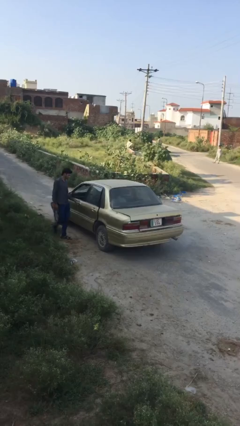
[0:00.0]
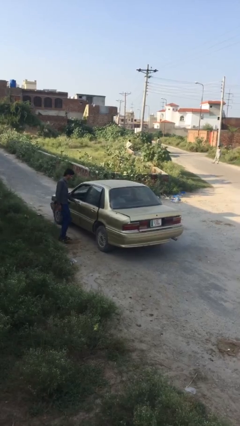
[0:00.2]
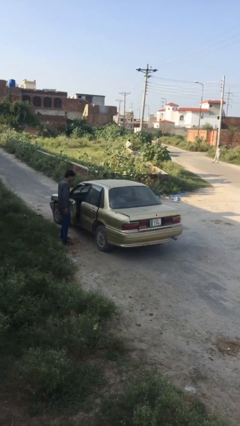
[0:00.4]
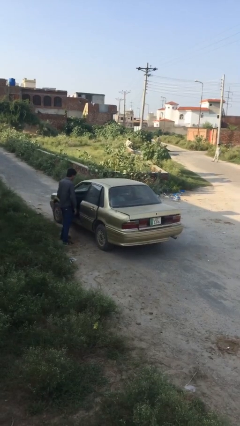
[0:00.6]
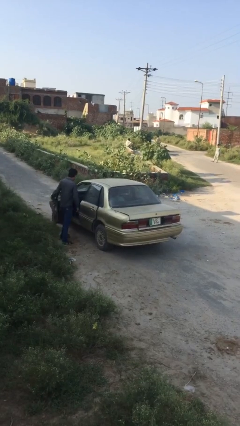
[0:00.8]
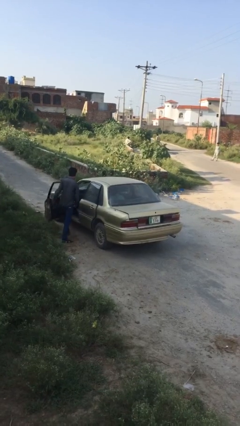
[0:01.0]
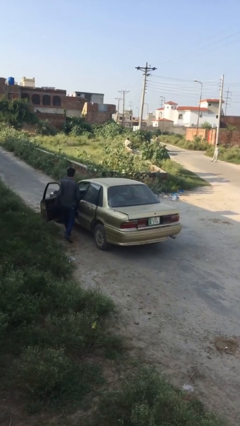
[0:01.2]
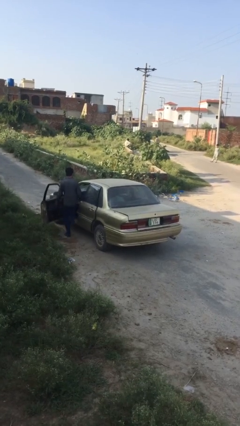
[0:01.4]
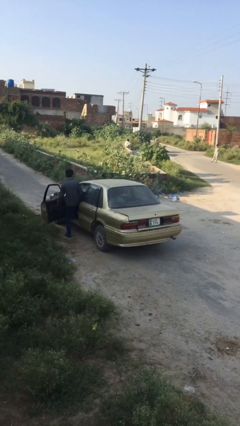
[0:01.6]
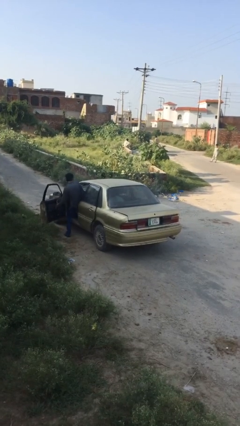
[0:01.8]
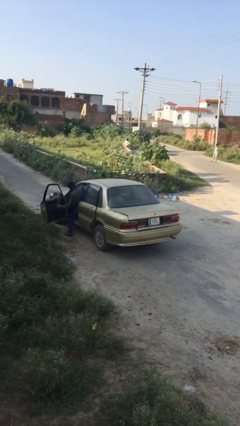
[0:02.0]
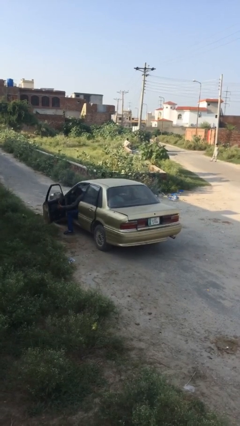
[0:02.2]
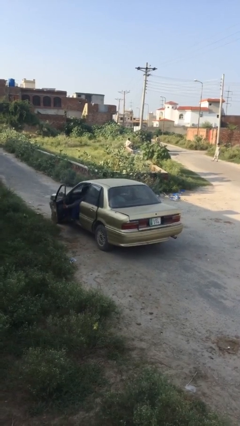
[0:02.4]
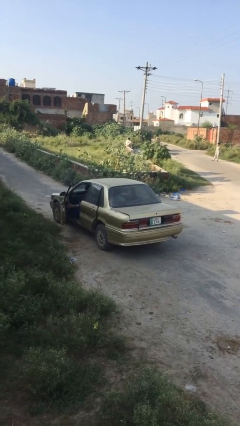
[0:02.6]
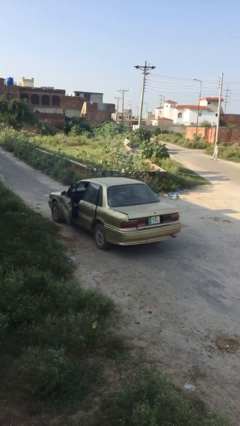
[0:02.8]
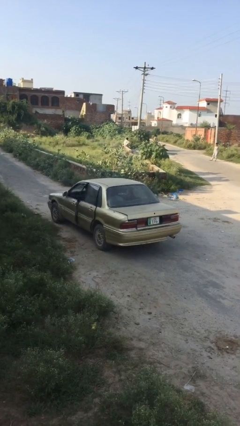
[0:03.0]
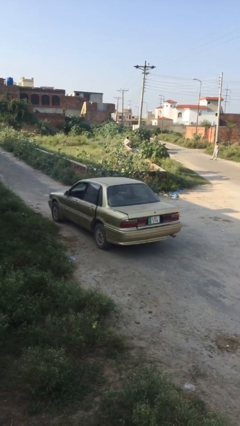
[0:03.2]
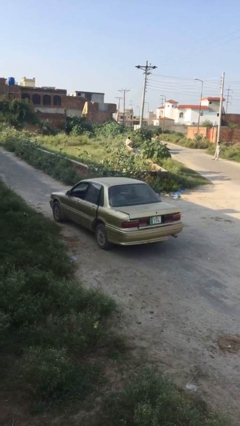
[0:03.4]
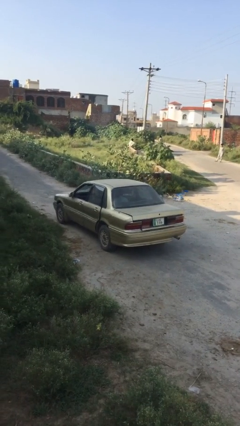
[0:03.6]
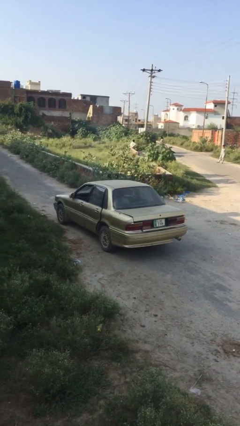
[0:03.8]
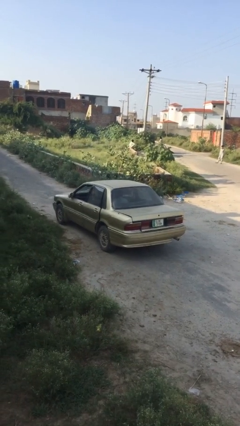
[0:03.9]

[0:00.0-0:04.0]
car picks up person

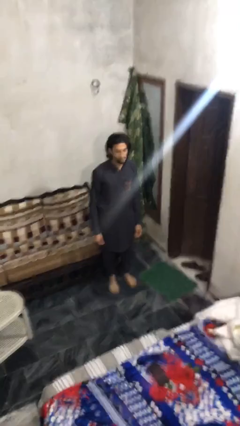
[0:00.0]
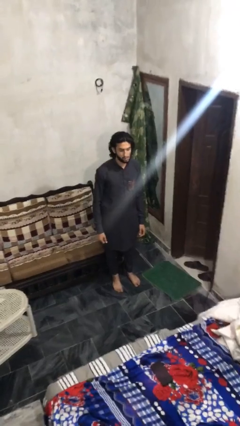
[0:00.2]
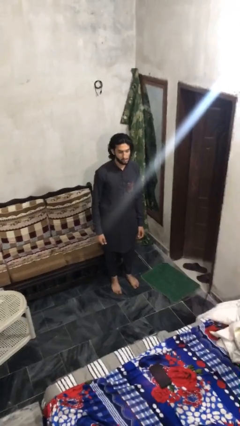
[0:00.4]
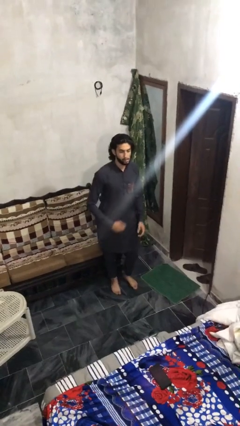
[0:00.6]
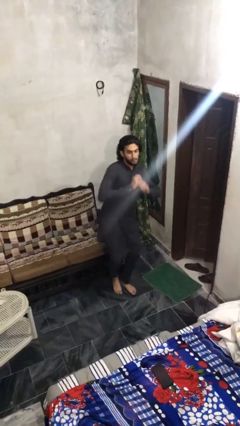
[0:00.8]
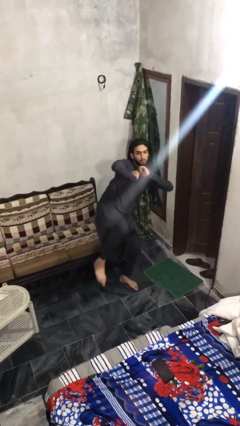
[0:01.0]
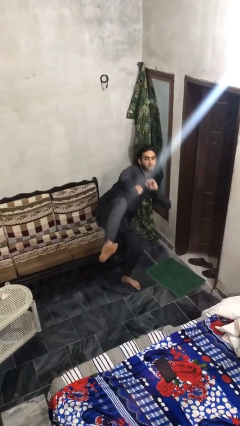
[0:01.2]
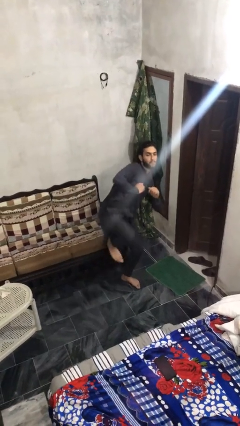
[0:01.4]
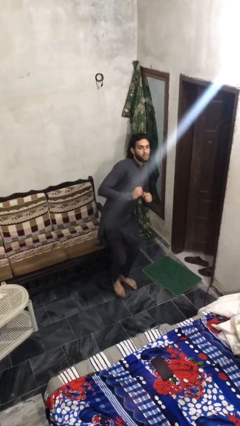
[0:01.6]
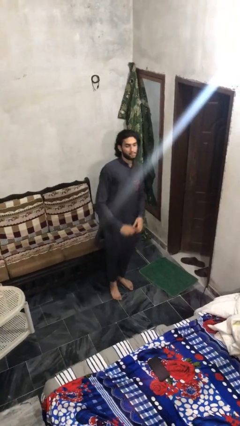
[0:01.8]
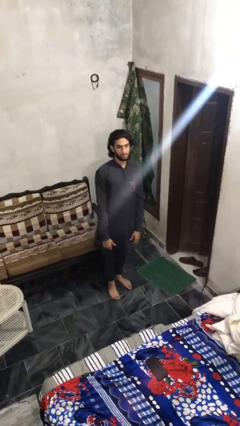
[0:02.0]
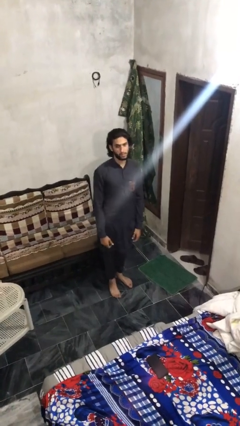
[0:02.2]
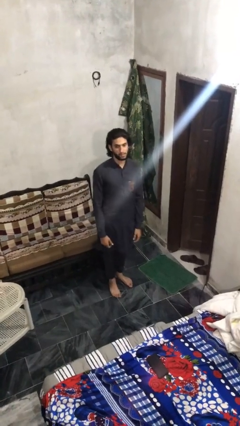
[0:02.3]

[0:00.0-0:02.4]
person karate kicks

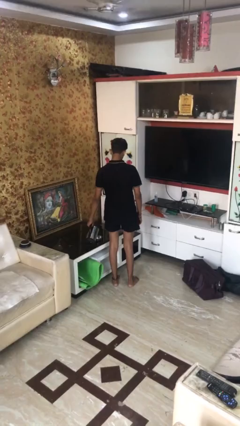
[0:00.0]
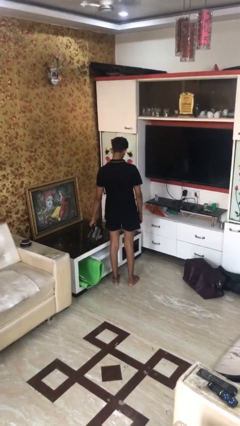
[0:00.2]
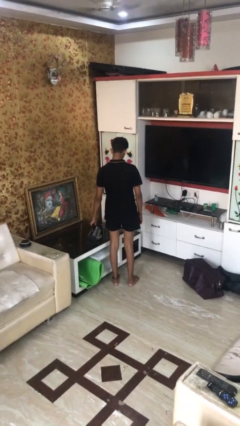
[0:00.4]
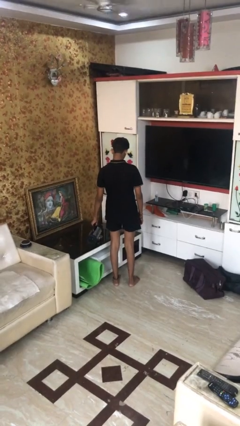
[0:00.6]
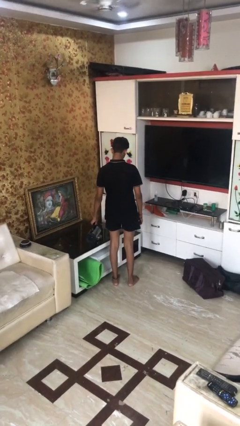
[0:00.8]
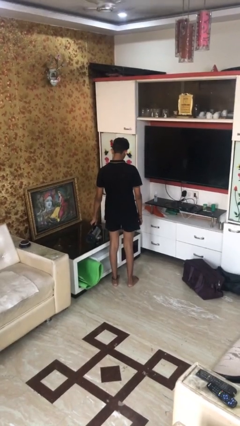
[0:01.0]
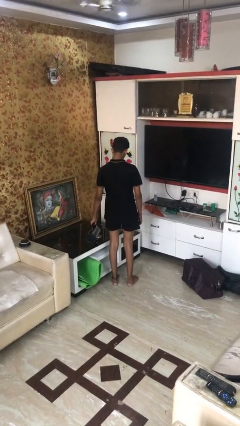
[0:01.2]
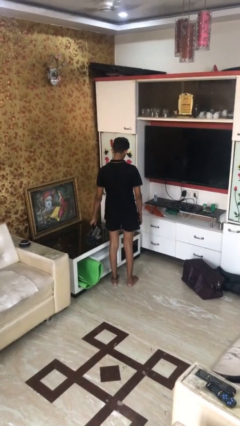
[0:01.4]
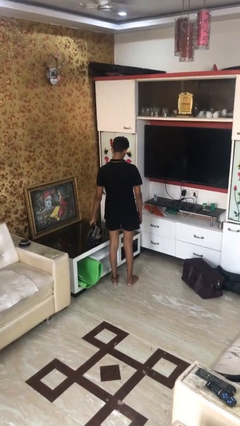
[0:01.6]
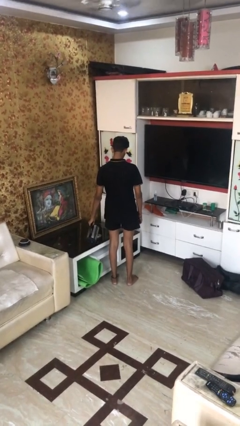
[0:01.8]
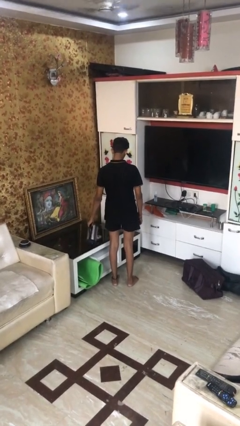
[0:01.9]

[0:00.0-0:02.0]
person pours into bowl

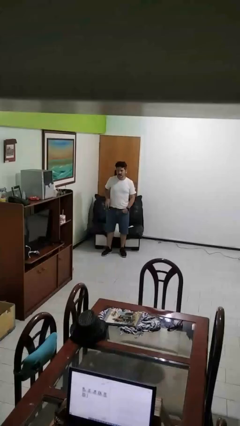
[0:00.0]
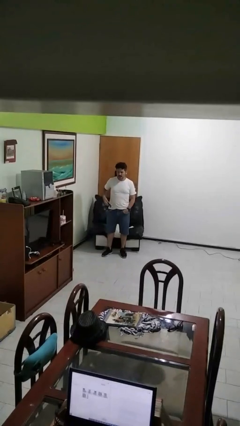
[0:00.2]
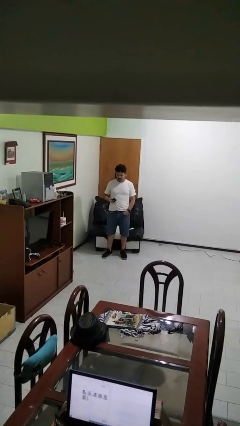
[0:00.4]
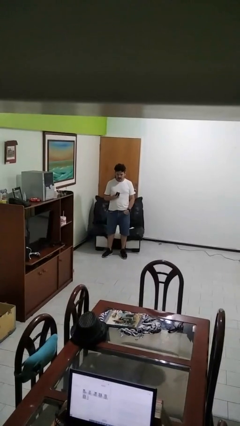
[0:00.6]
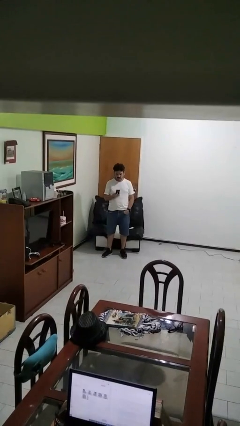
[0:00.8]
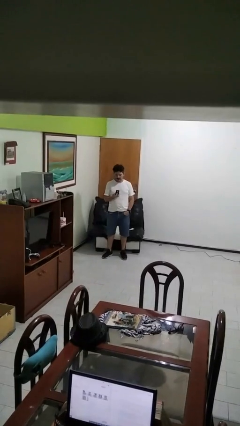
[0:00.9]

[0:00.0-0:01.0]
person takes phone from pocket

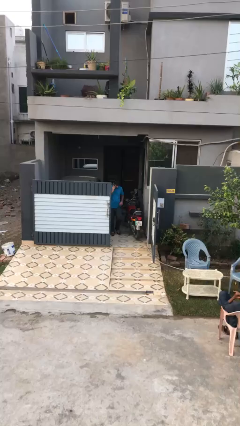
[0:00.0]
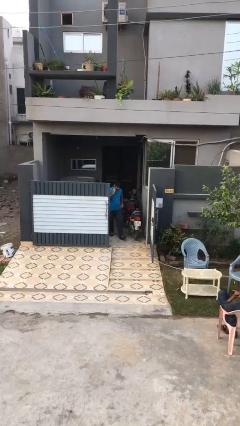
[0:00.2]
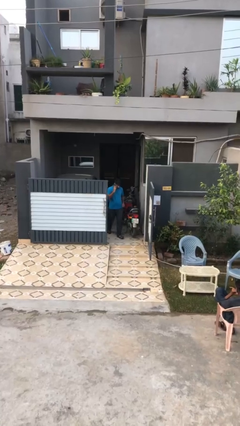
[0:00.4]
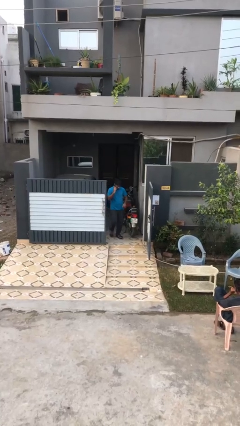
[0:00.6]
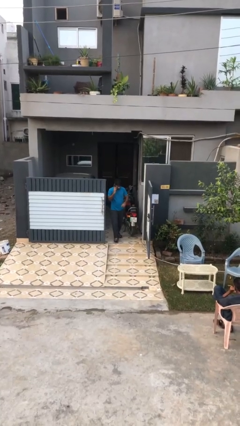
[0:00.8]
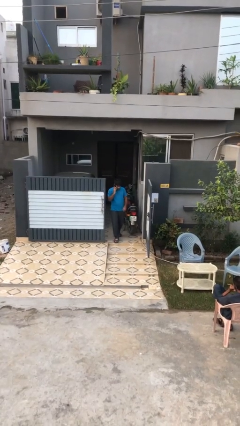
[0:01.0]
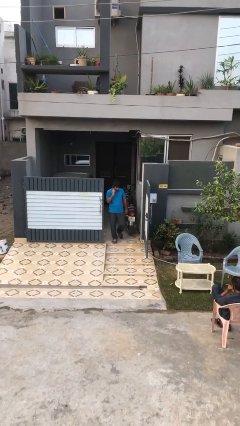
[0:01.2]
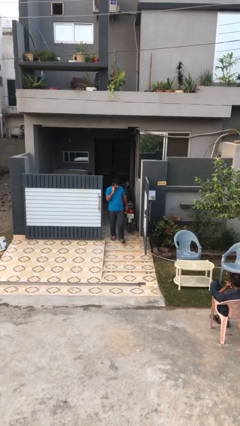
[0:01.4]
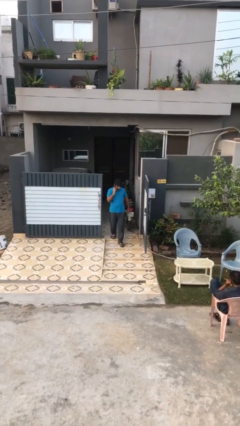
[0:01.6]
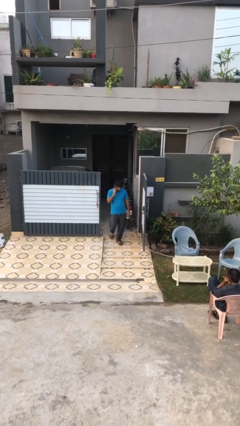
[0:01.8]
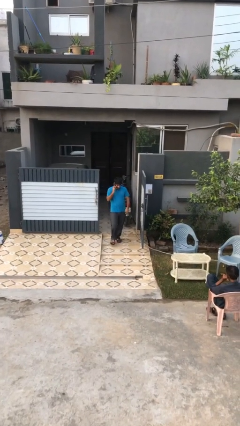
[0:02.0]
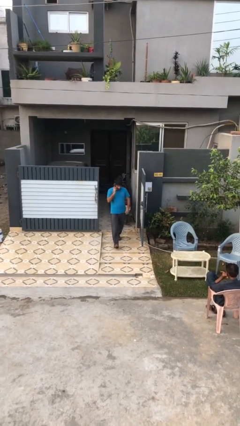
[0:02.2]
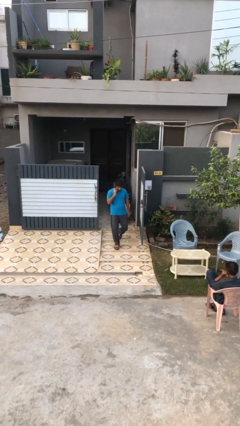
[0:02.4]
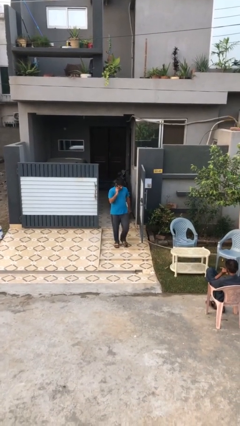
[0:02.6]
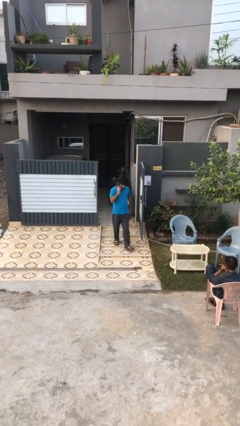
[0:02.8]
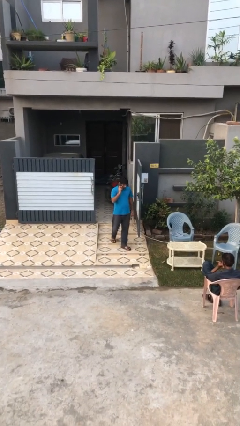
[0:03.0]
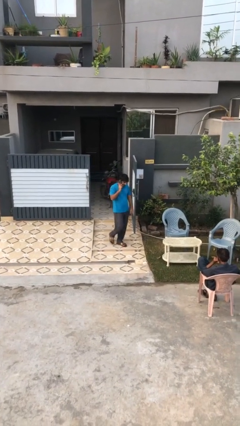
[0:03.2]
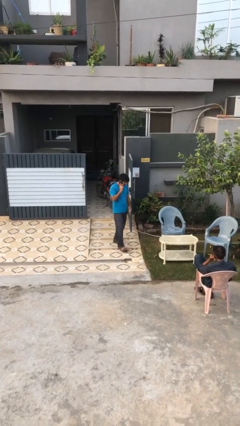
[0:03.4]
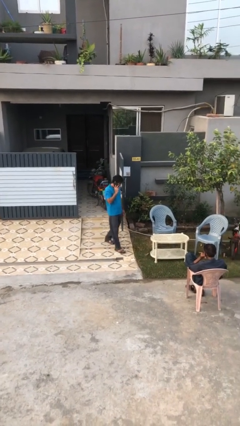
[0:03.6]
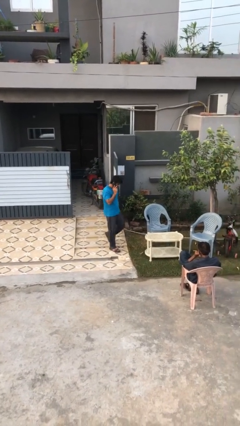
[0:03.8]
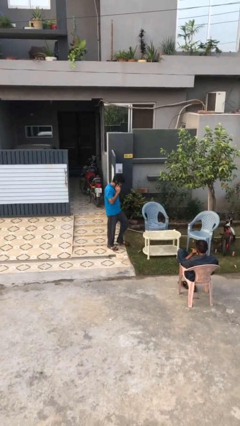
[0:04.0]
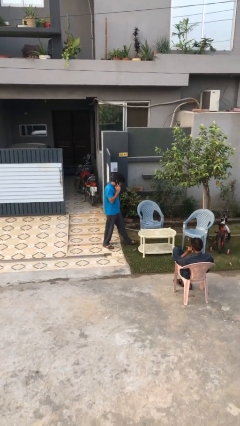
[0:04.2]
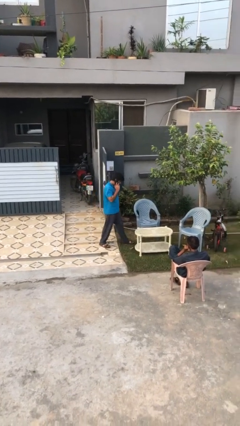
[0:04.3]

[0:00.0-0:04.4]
person enters scene through structure

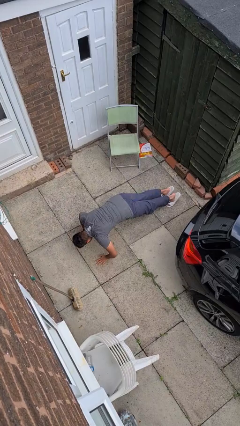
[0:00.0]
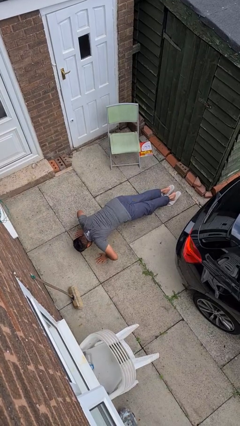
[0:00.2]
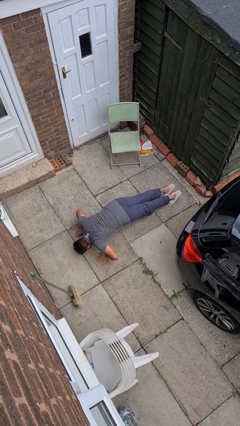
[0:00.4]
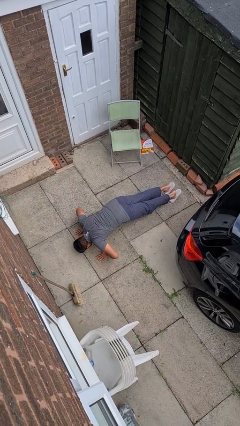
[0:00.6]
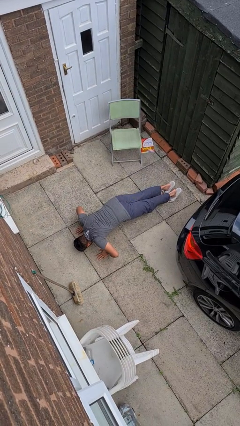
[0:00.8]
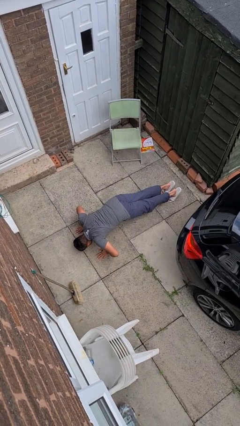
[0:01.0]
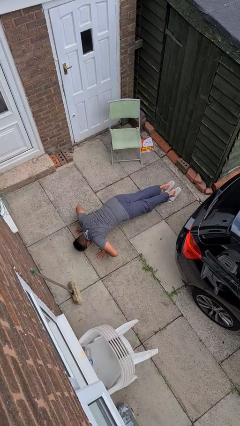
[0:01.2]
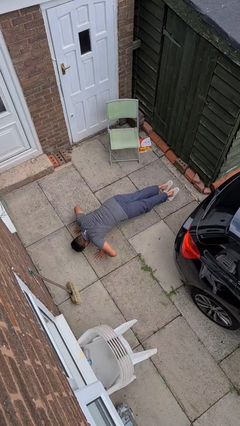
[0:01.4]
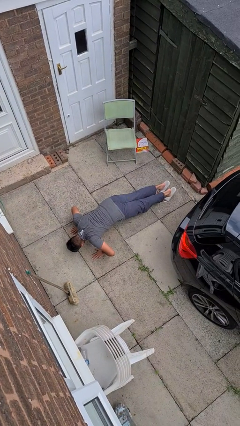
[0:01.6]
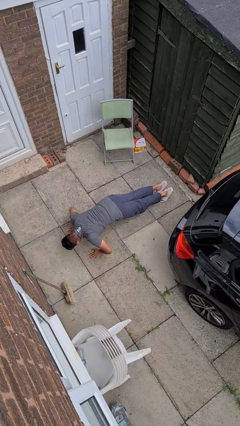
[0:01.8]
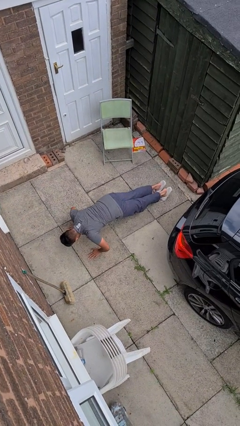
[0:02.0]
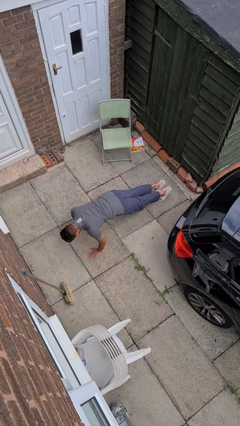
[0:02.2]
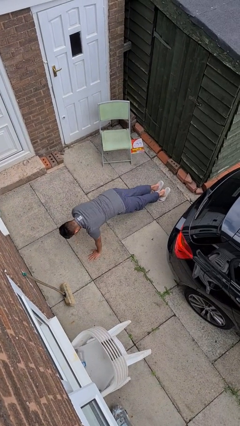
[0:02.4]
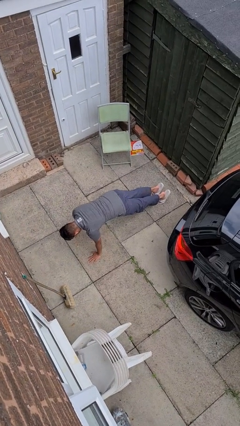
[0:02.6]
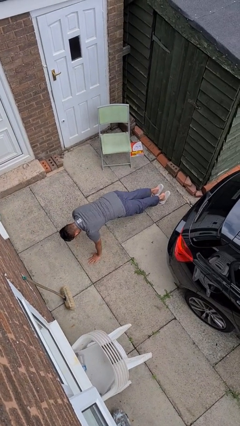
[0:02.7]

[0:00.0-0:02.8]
person exercises with pushup

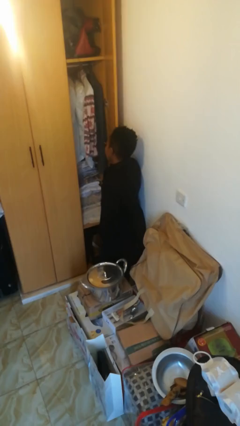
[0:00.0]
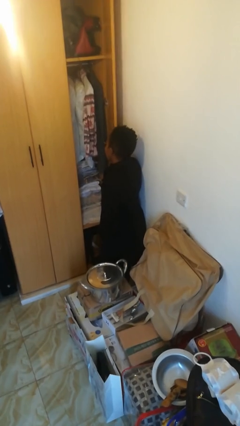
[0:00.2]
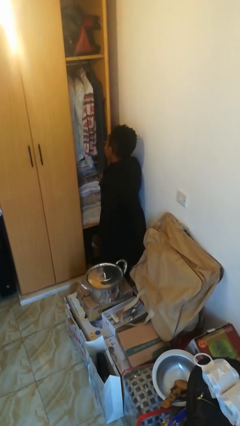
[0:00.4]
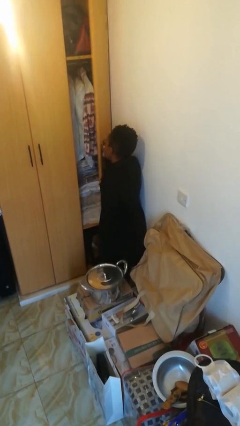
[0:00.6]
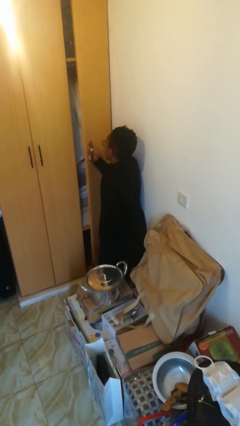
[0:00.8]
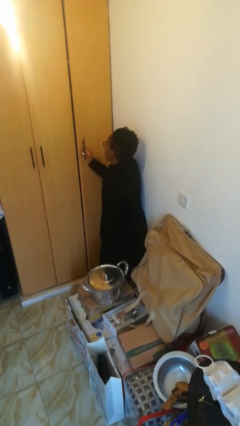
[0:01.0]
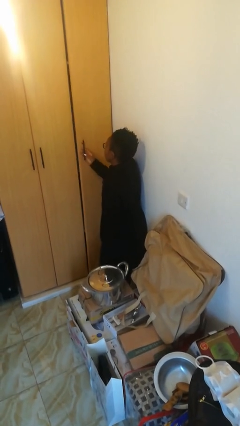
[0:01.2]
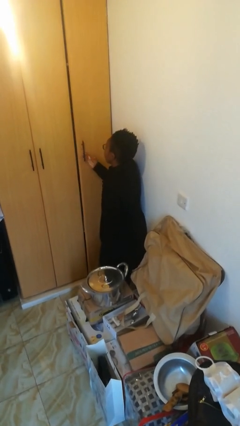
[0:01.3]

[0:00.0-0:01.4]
person closes closet door
